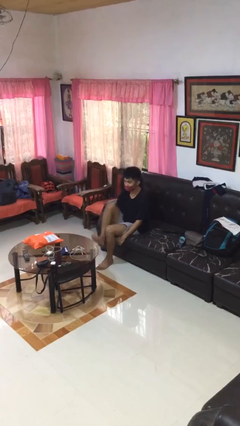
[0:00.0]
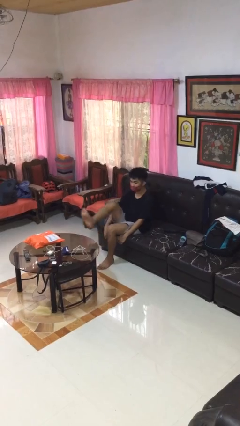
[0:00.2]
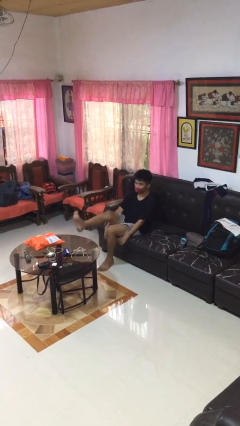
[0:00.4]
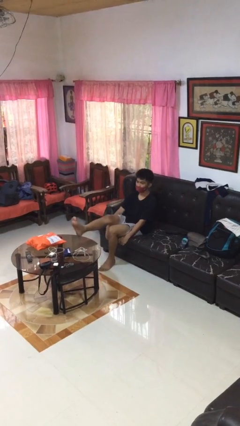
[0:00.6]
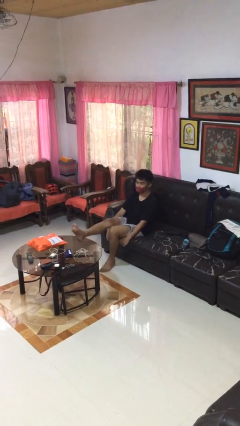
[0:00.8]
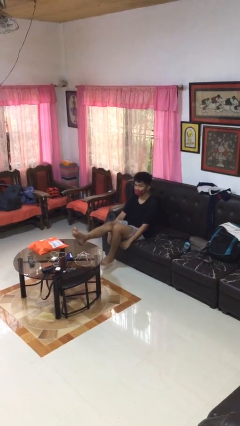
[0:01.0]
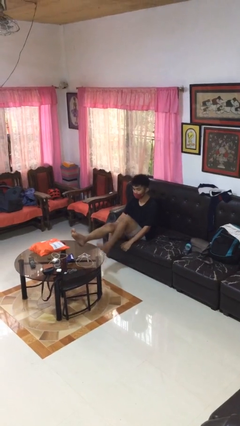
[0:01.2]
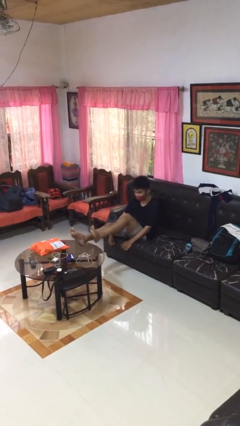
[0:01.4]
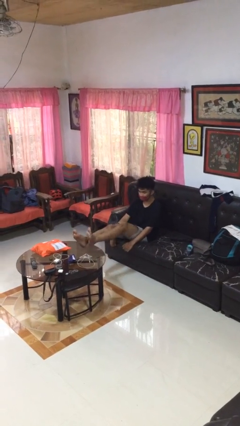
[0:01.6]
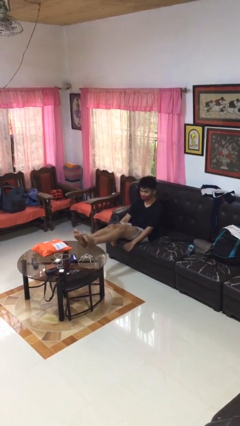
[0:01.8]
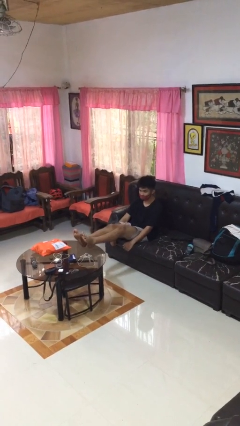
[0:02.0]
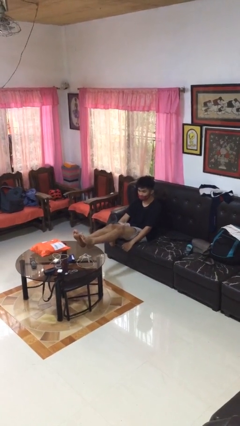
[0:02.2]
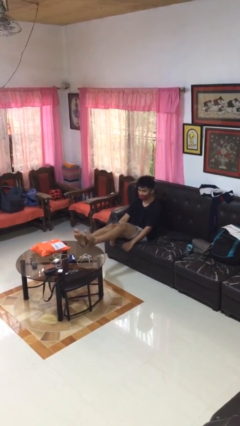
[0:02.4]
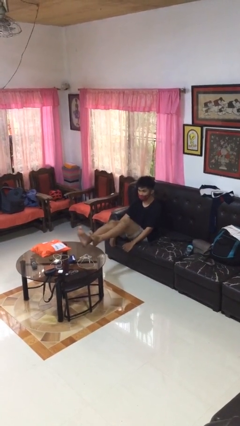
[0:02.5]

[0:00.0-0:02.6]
person puts feet up

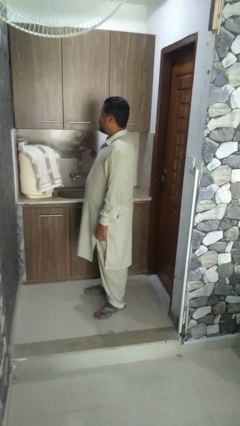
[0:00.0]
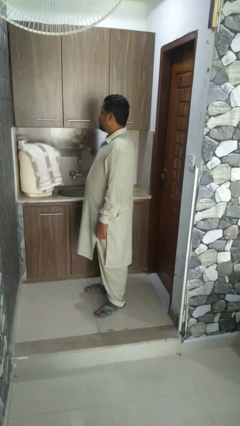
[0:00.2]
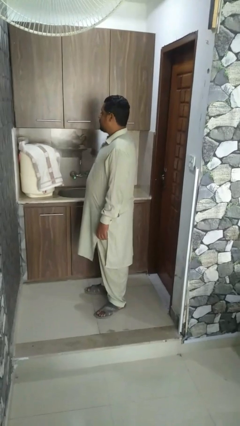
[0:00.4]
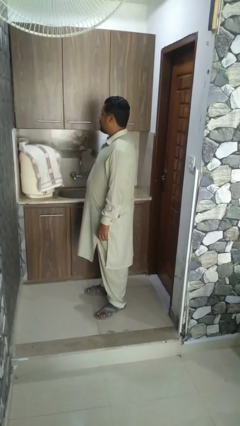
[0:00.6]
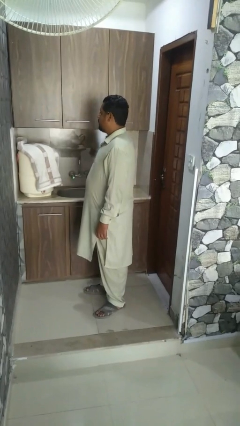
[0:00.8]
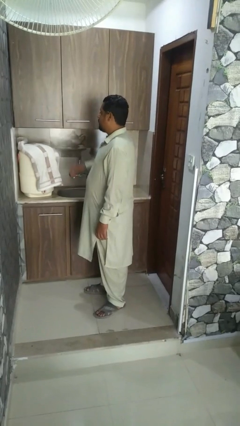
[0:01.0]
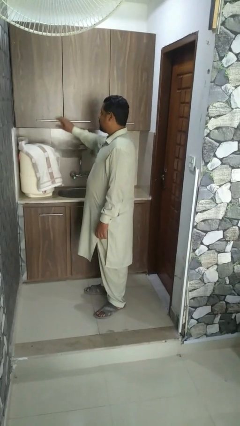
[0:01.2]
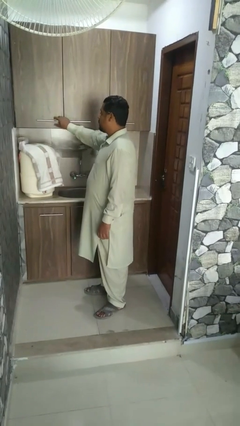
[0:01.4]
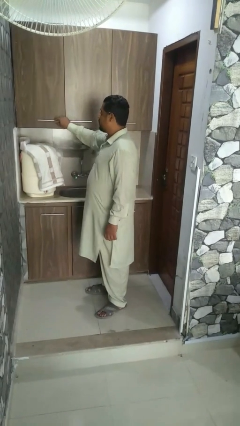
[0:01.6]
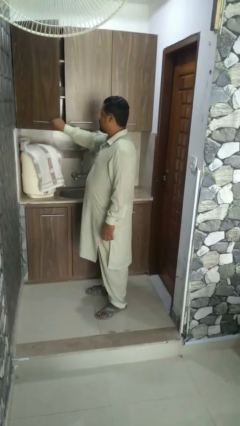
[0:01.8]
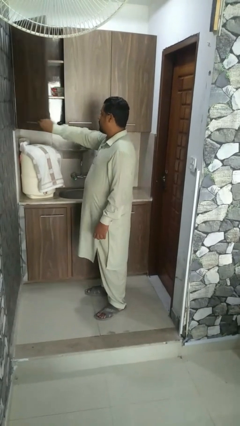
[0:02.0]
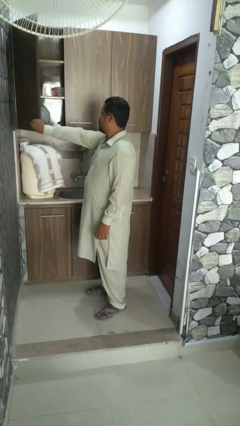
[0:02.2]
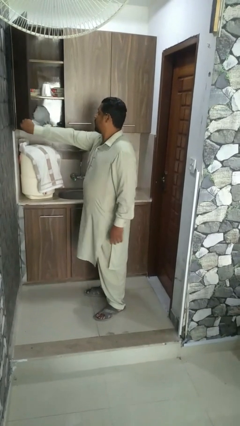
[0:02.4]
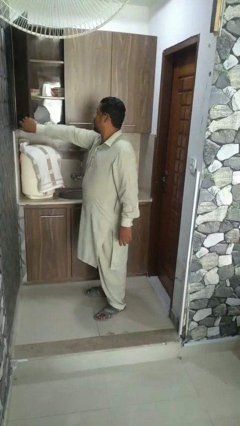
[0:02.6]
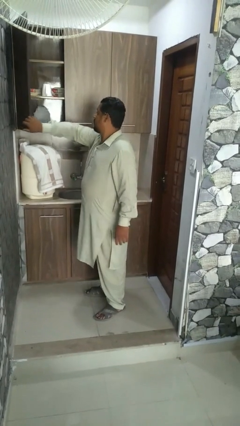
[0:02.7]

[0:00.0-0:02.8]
person opens microwave

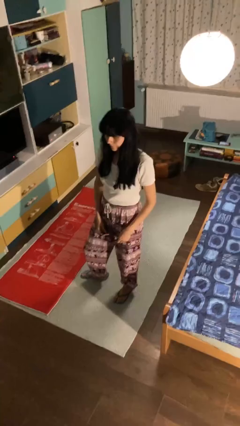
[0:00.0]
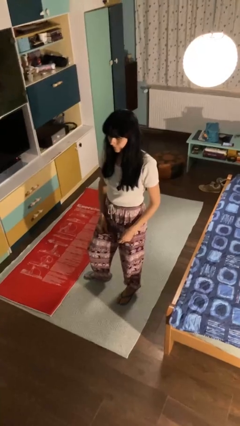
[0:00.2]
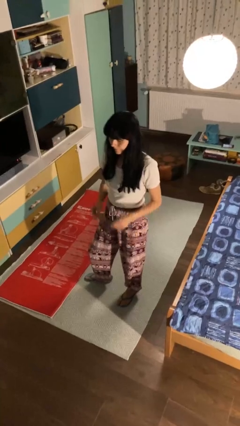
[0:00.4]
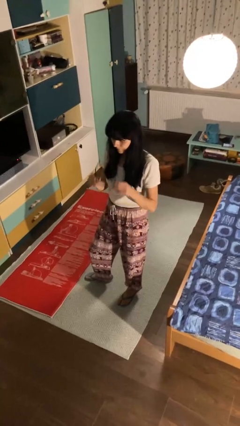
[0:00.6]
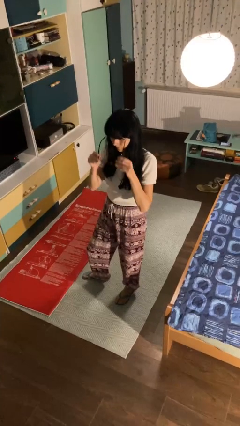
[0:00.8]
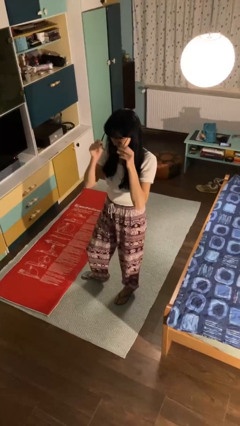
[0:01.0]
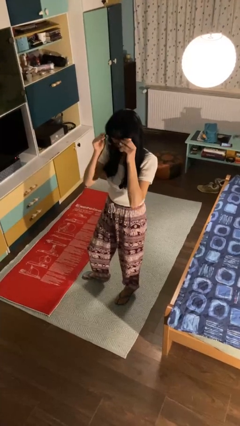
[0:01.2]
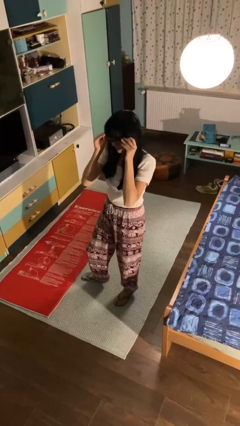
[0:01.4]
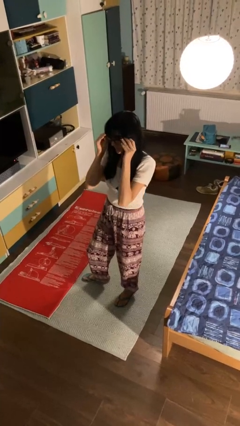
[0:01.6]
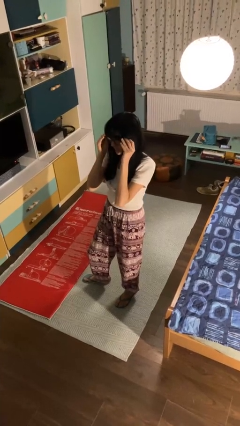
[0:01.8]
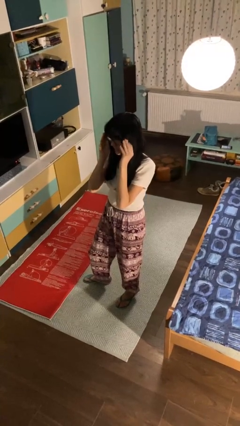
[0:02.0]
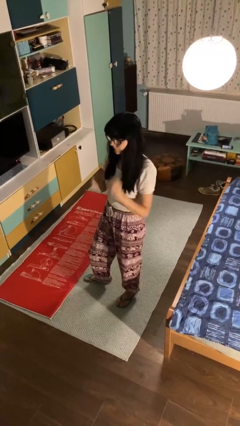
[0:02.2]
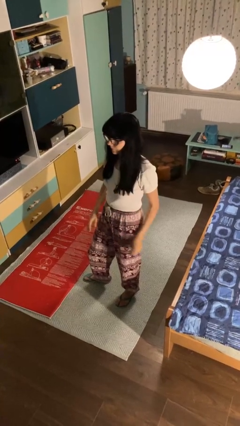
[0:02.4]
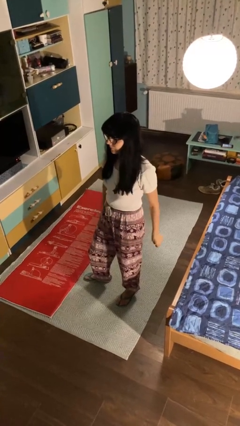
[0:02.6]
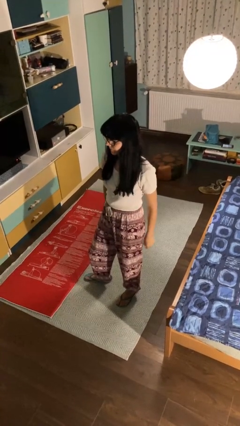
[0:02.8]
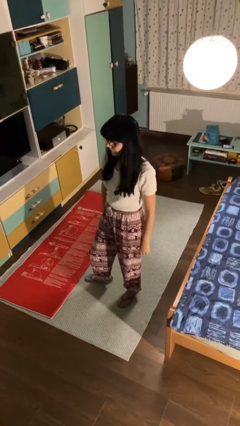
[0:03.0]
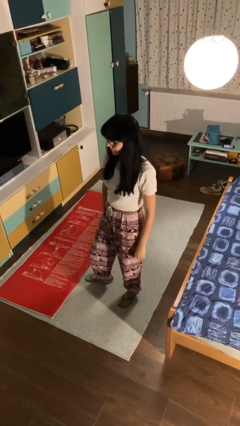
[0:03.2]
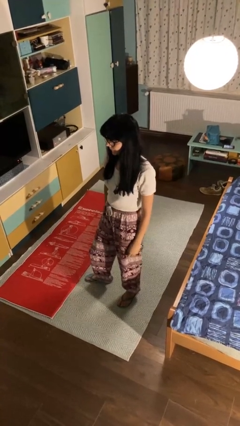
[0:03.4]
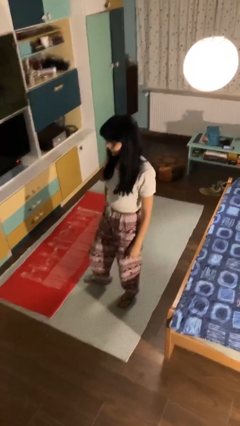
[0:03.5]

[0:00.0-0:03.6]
person puts on glasses

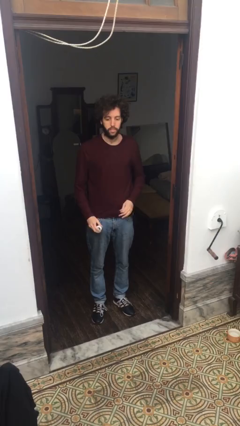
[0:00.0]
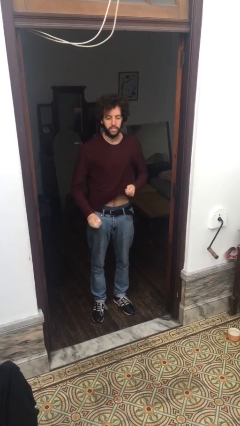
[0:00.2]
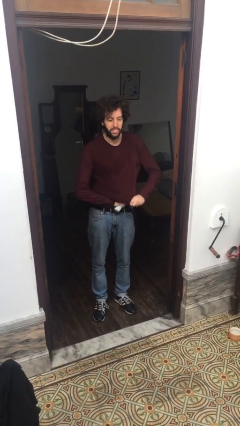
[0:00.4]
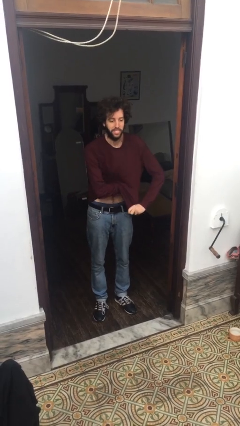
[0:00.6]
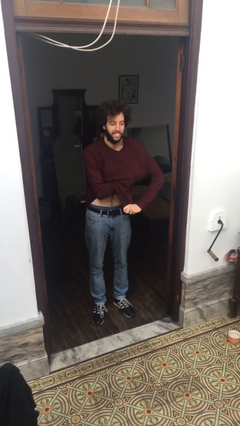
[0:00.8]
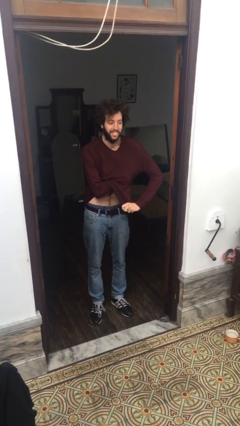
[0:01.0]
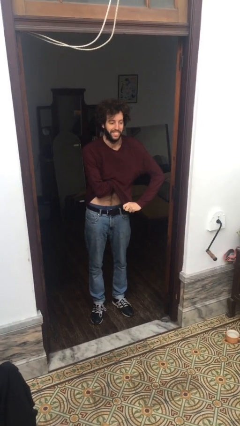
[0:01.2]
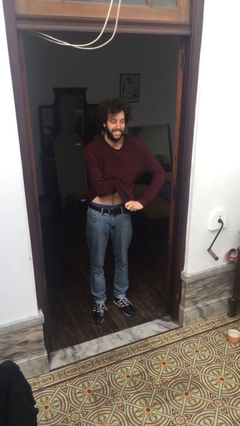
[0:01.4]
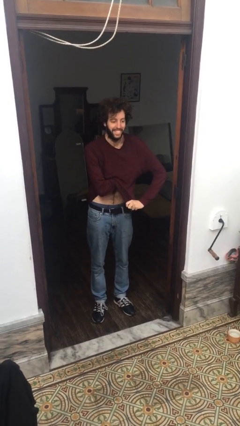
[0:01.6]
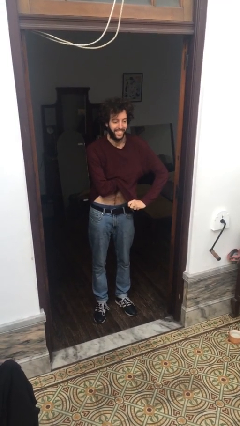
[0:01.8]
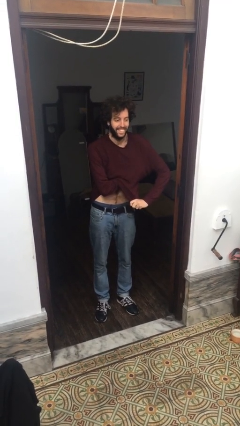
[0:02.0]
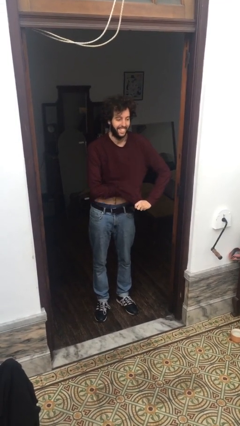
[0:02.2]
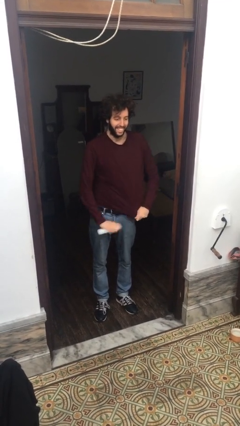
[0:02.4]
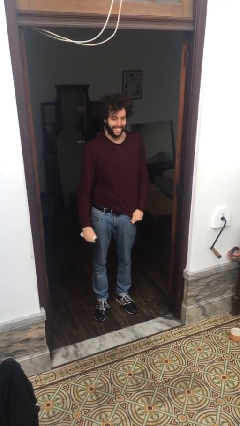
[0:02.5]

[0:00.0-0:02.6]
person applies deodorant

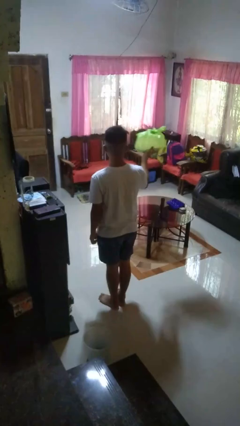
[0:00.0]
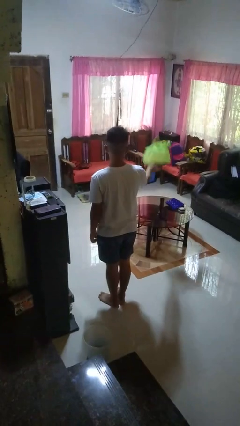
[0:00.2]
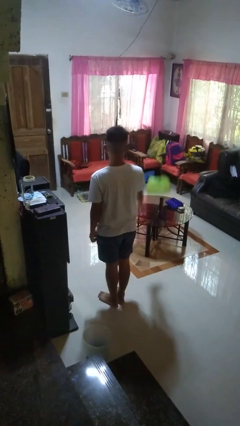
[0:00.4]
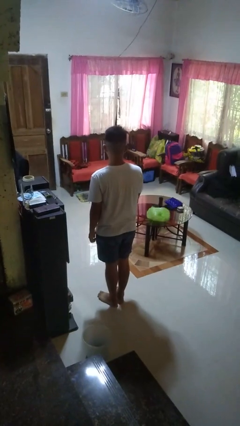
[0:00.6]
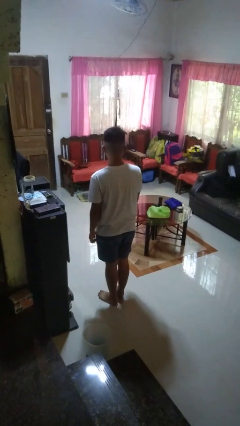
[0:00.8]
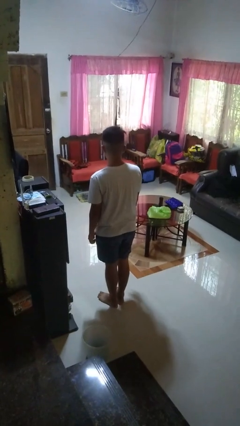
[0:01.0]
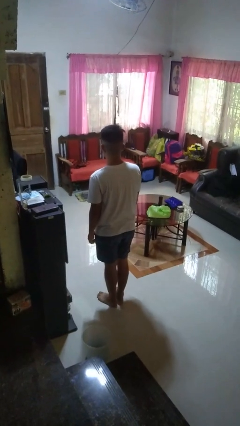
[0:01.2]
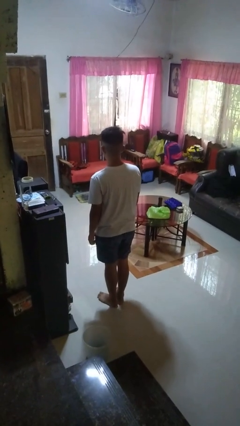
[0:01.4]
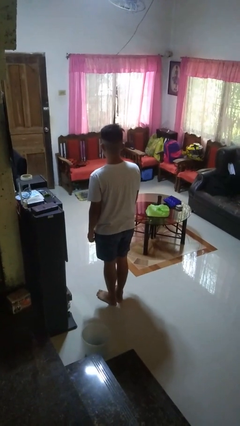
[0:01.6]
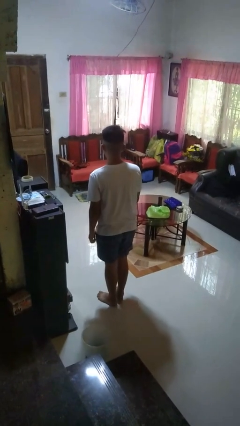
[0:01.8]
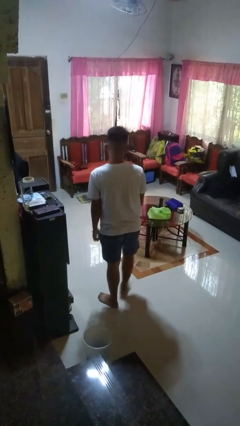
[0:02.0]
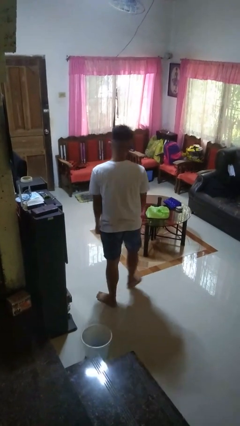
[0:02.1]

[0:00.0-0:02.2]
person throws object on table

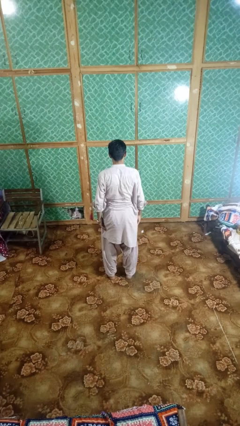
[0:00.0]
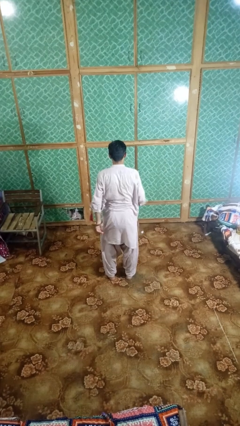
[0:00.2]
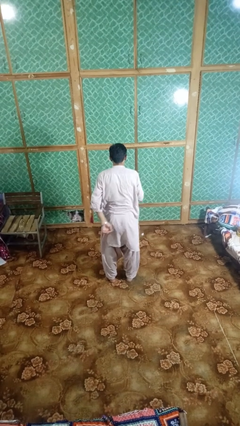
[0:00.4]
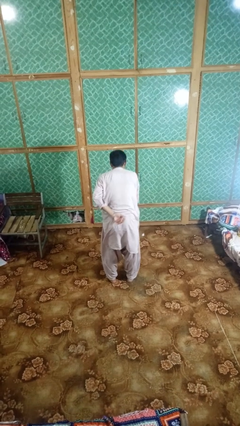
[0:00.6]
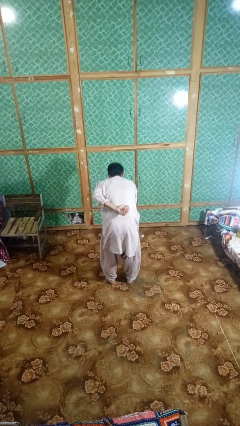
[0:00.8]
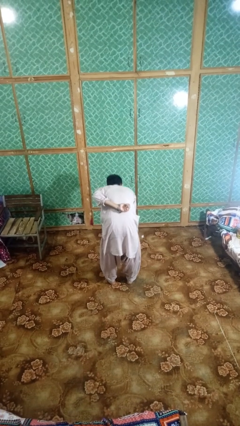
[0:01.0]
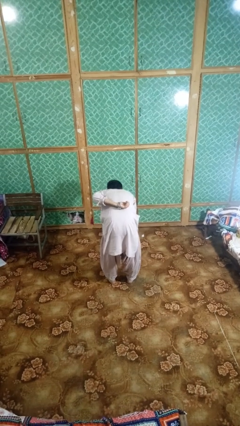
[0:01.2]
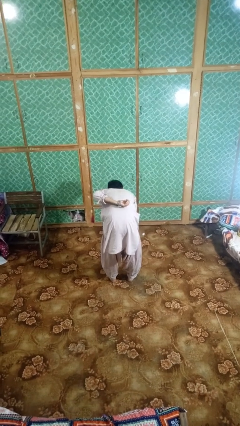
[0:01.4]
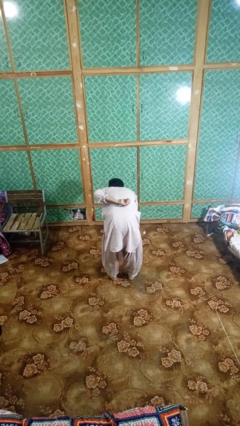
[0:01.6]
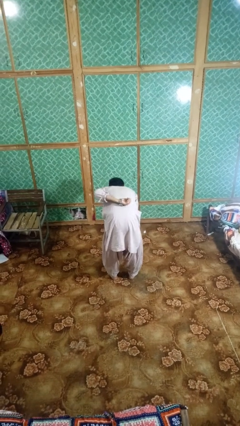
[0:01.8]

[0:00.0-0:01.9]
person bows

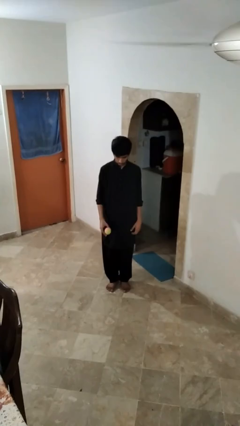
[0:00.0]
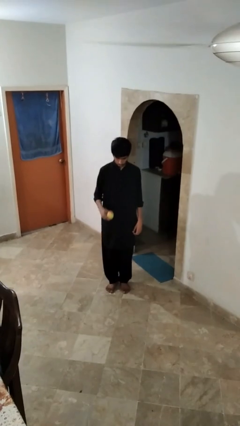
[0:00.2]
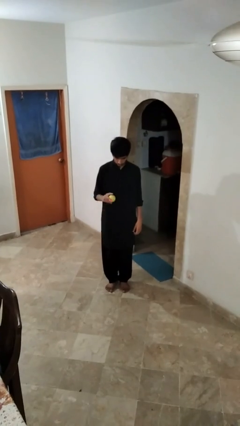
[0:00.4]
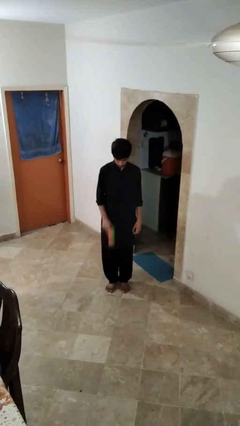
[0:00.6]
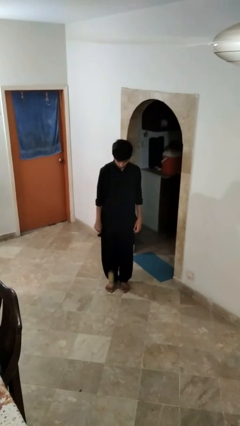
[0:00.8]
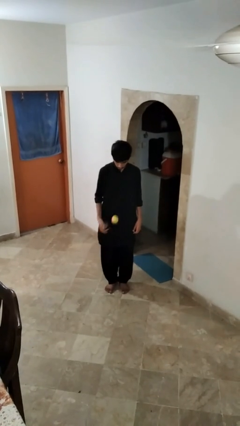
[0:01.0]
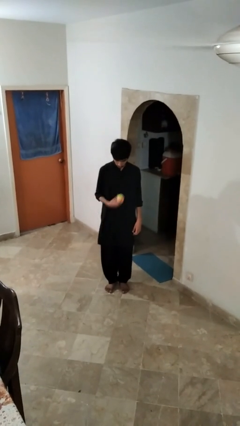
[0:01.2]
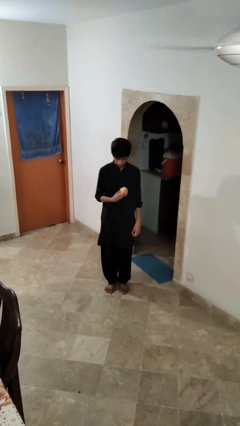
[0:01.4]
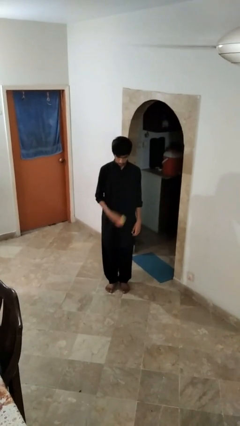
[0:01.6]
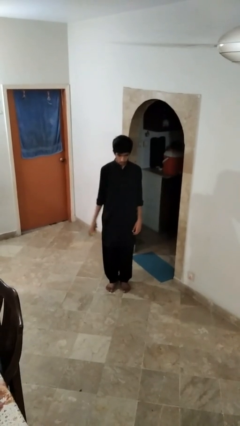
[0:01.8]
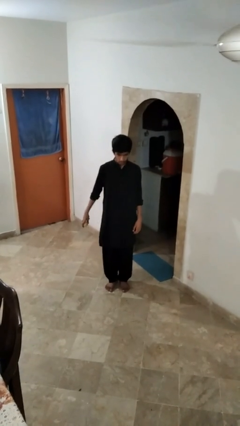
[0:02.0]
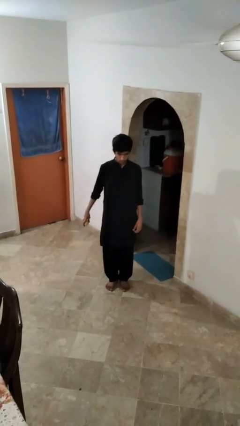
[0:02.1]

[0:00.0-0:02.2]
person bounces ball on floor
